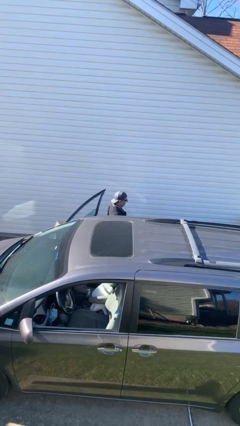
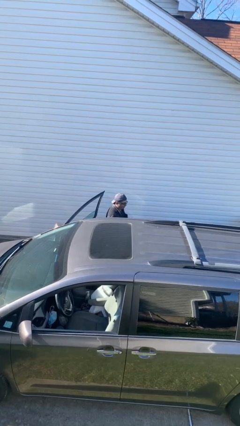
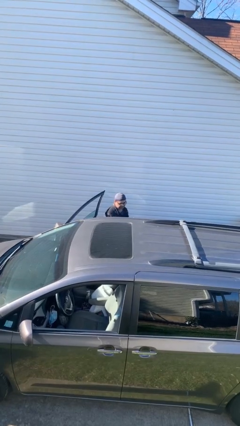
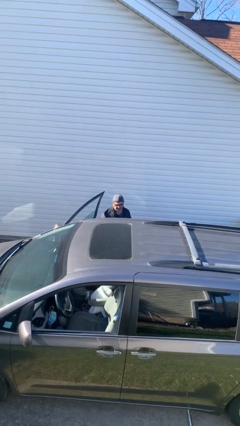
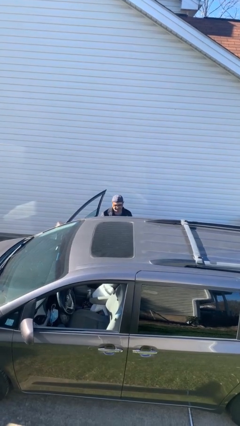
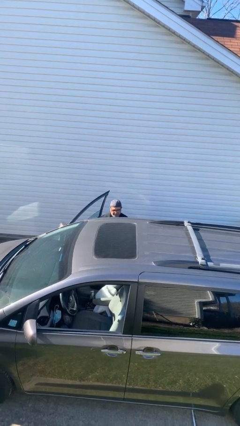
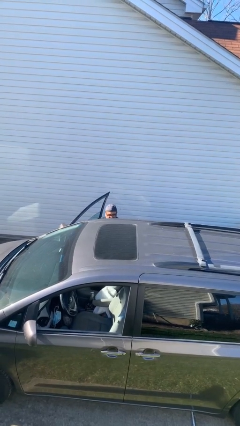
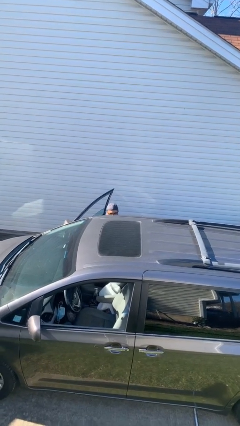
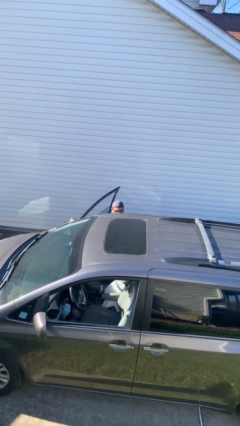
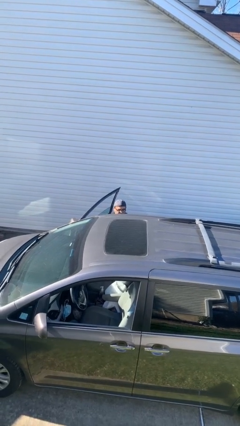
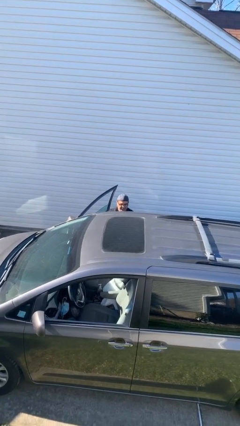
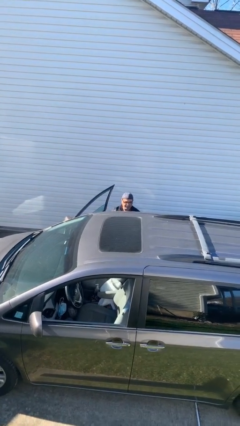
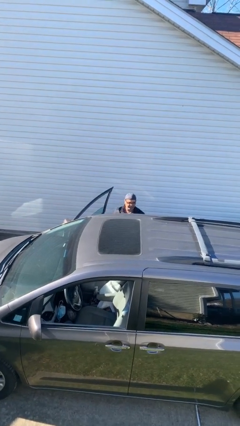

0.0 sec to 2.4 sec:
person unloads car

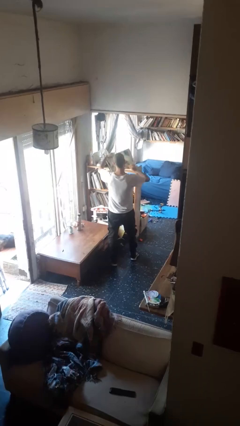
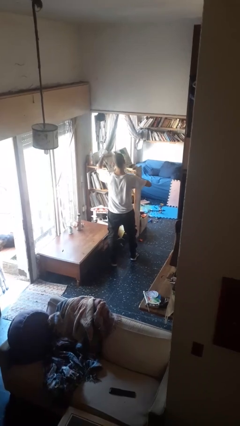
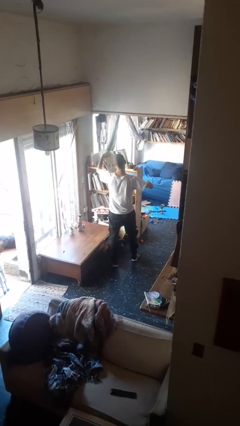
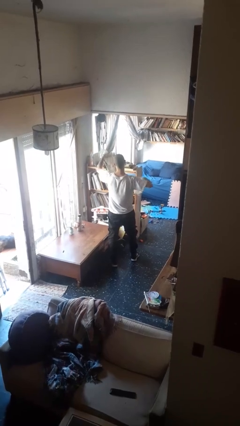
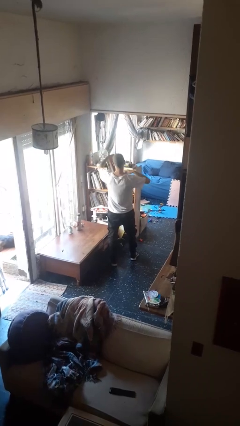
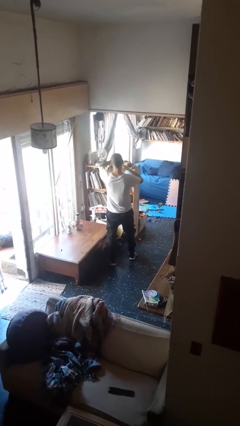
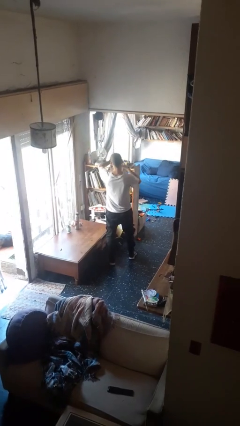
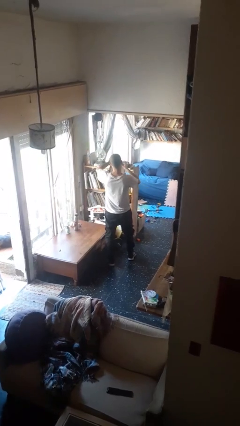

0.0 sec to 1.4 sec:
person tears paper

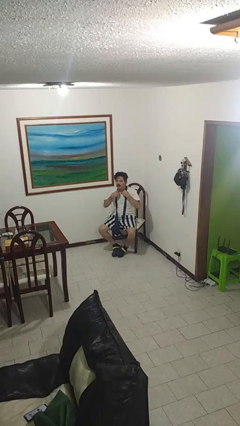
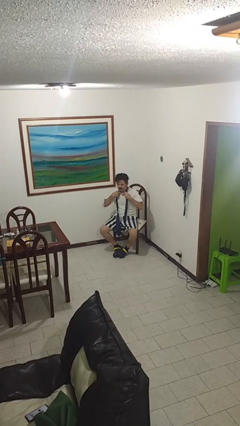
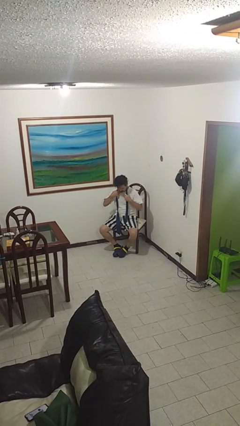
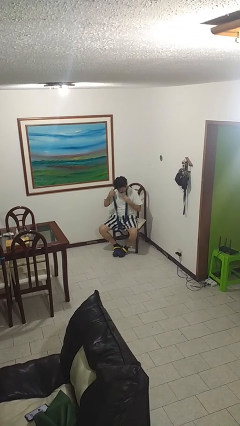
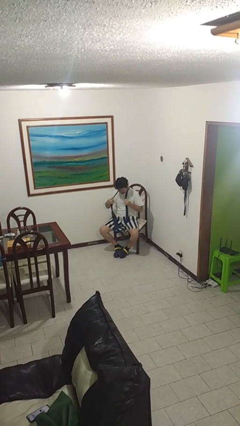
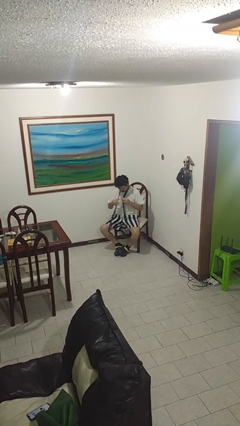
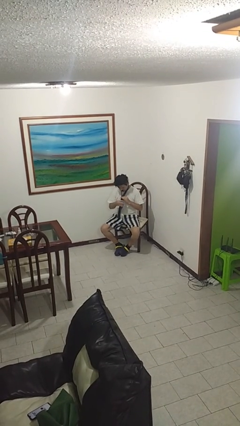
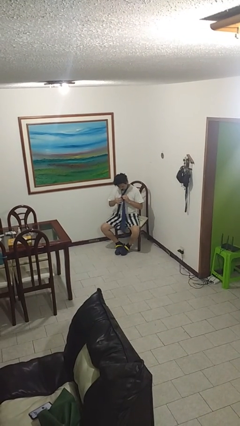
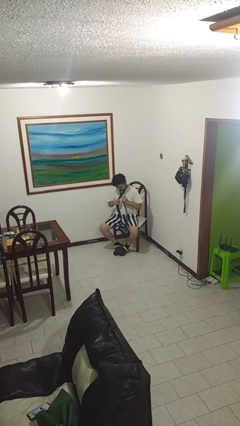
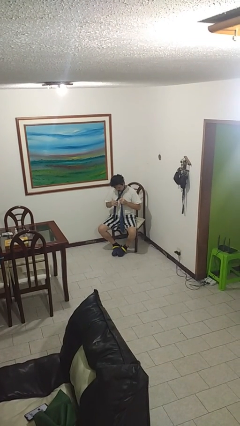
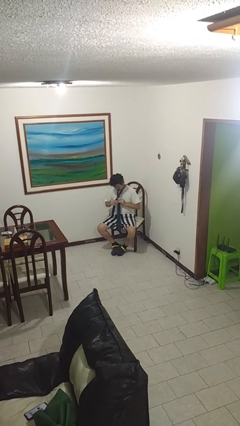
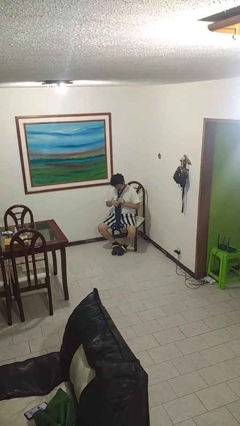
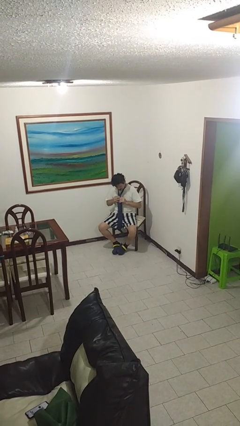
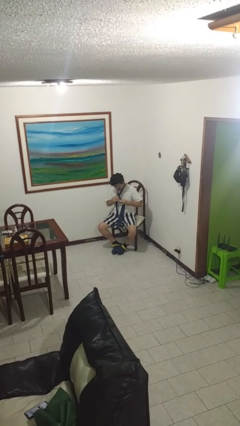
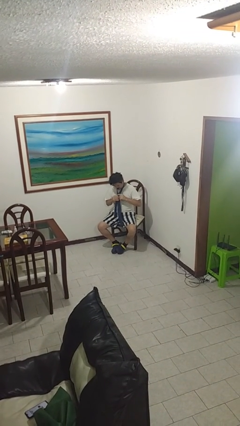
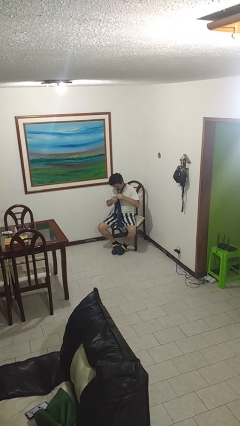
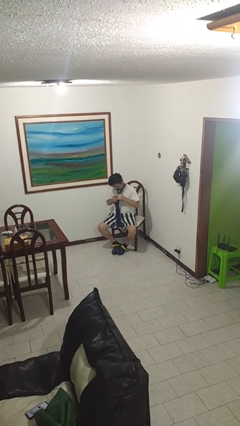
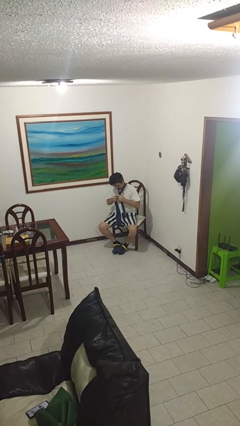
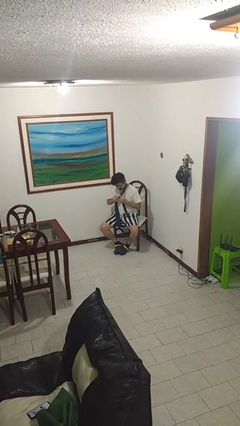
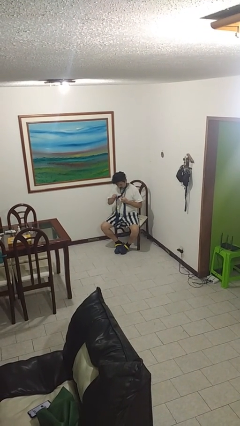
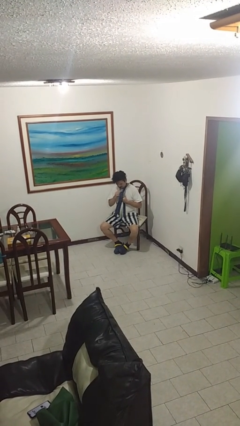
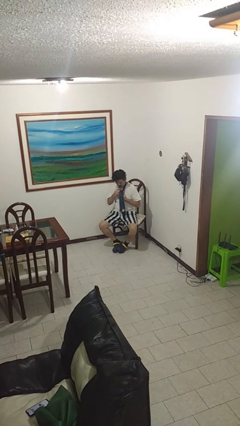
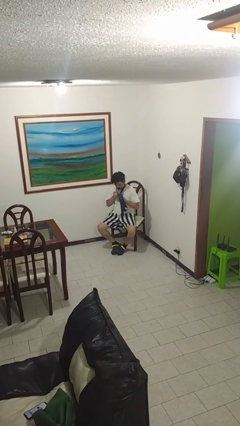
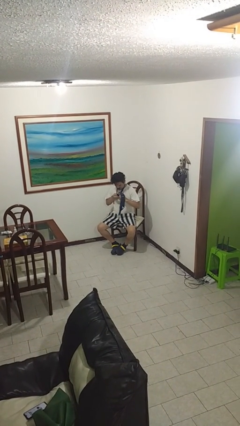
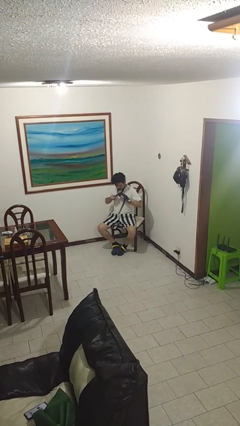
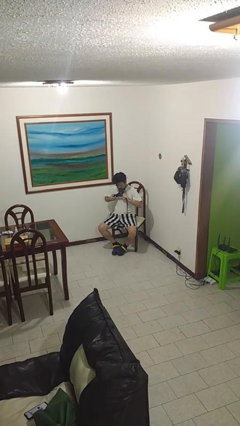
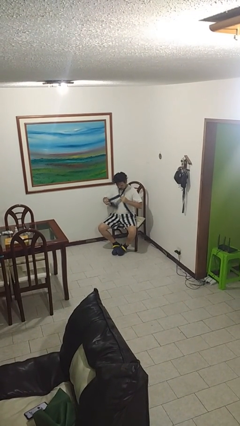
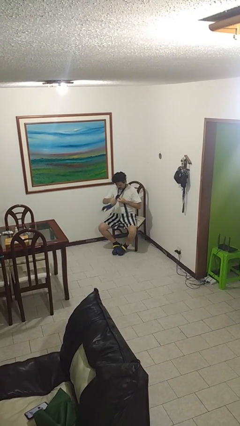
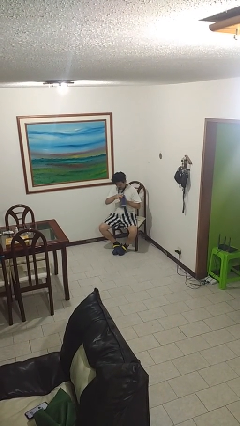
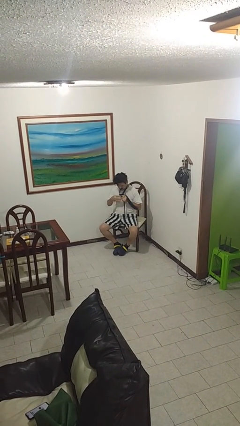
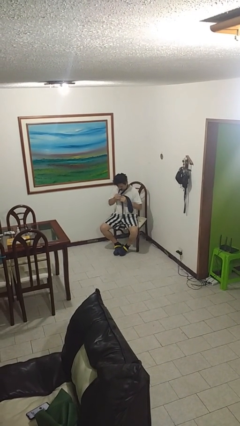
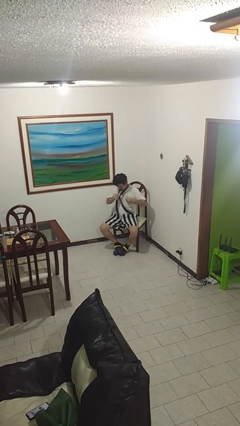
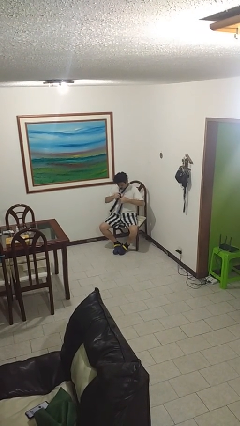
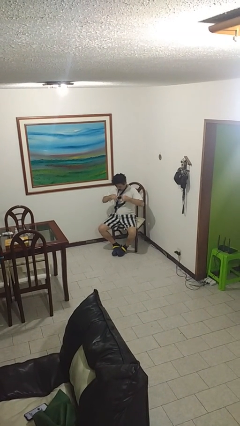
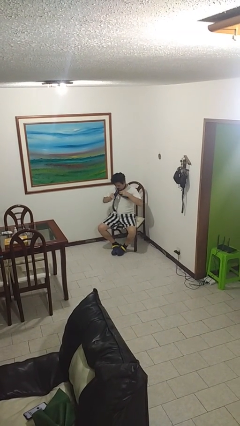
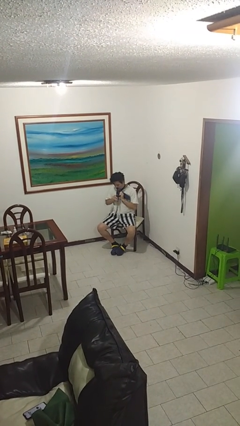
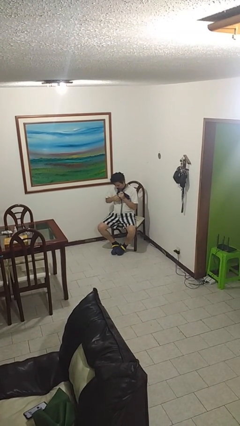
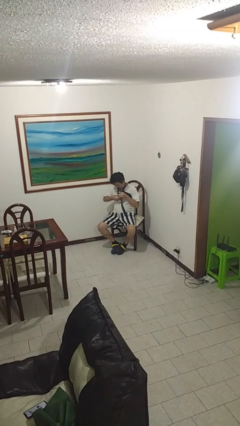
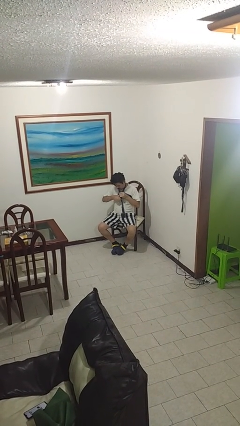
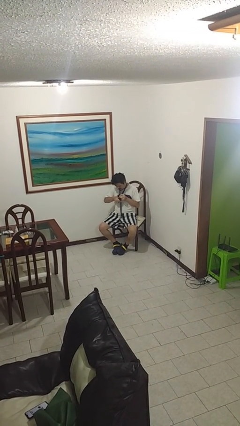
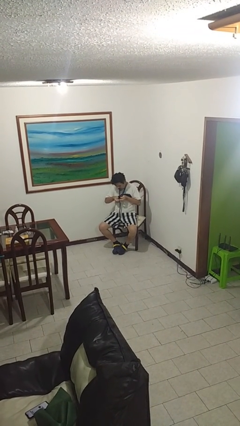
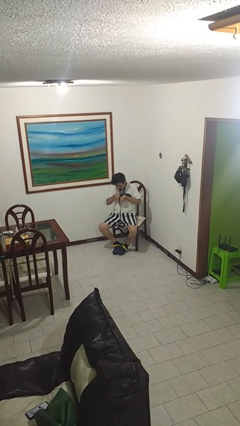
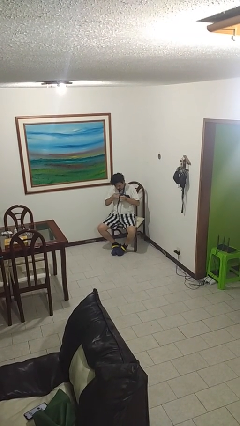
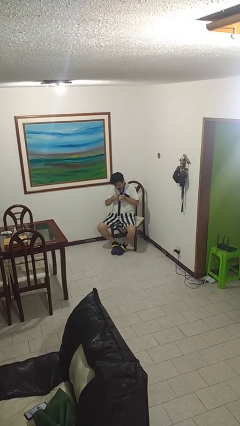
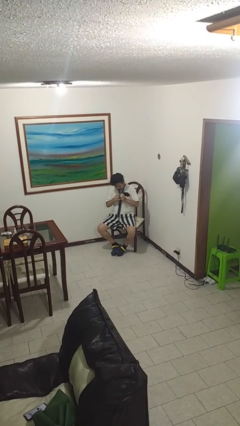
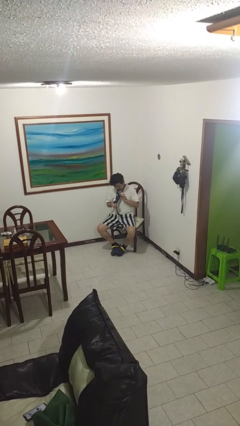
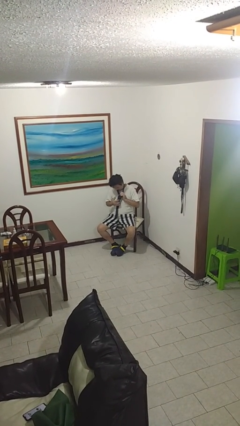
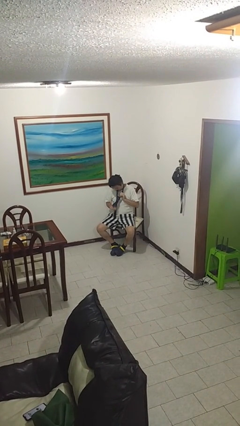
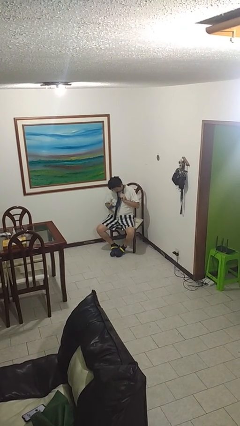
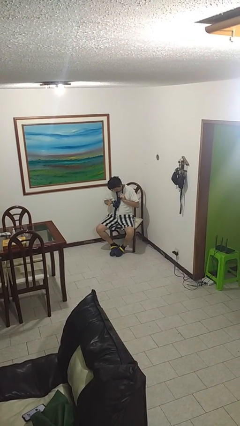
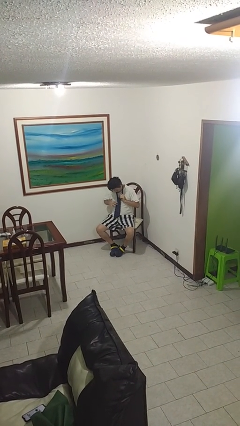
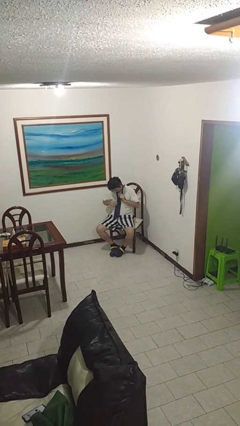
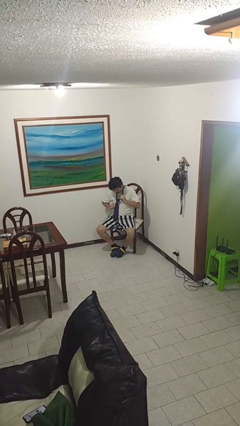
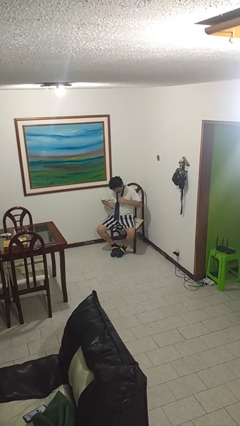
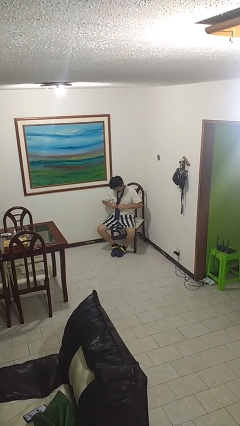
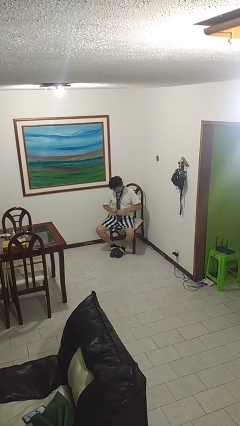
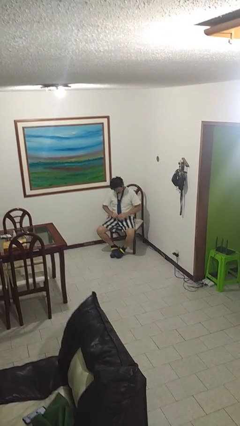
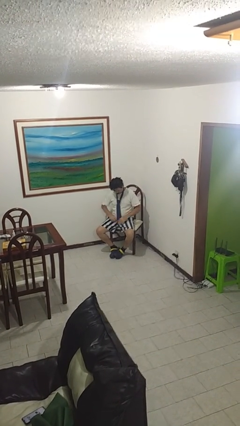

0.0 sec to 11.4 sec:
person puts on necktie

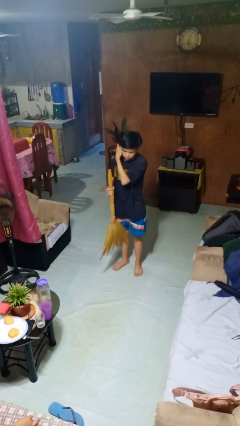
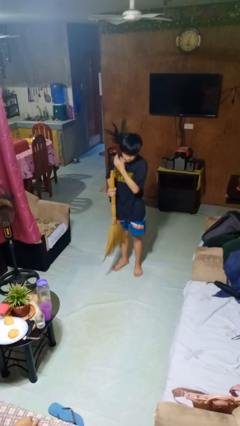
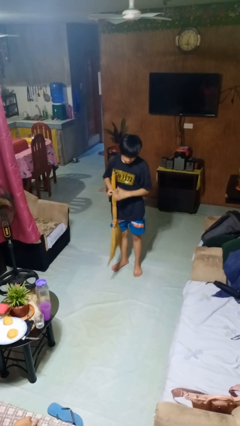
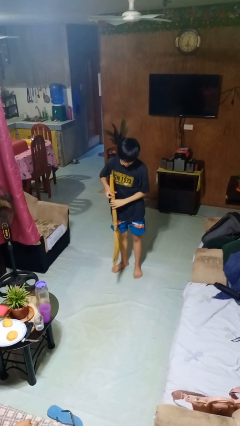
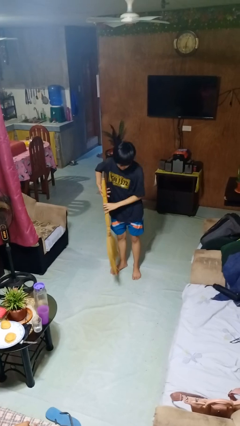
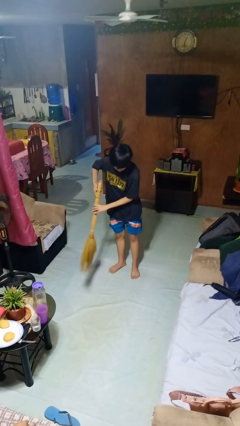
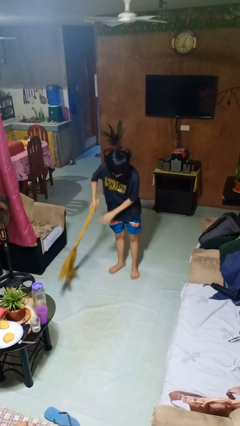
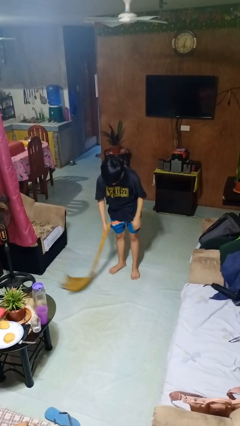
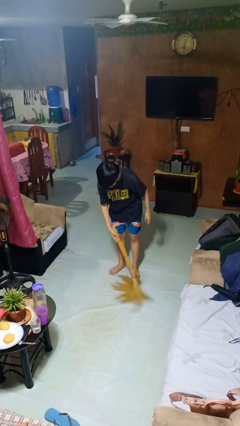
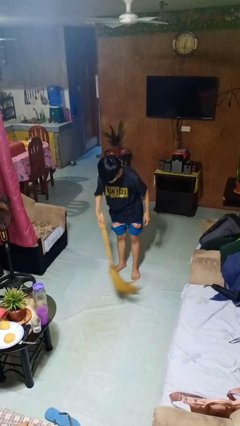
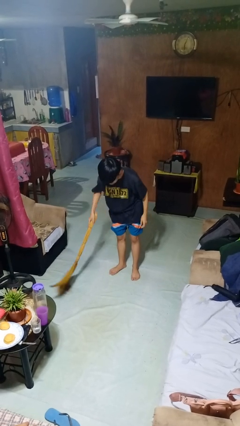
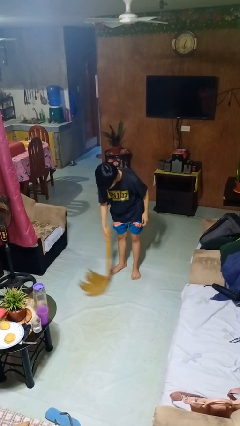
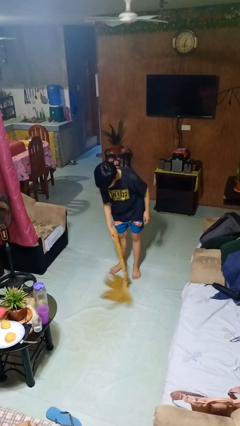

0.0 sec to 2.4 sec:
person sweeps floor

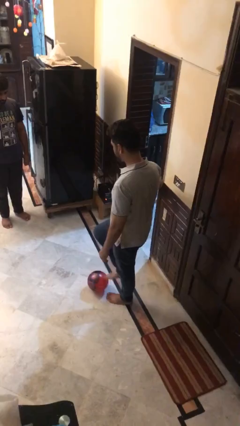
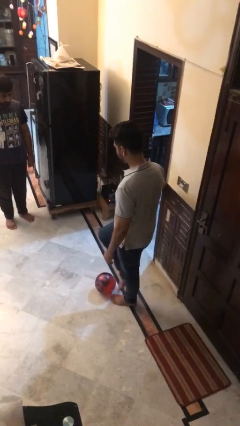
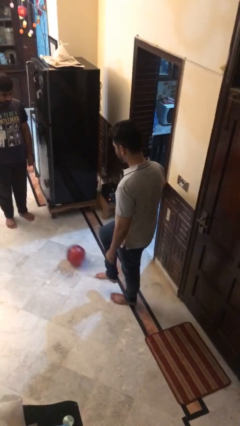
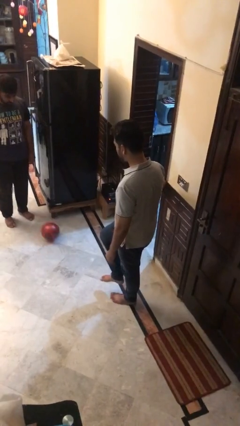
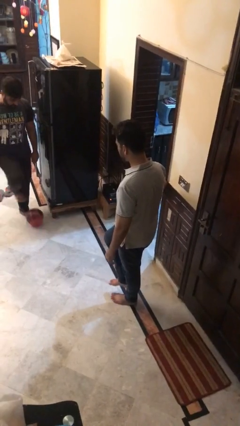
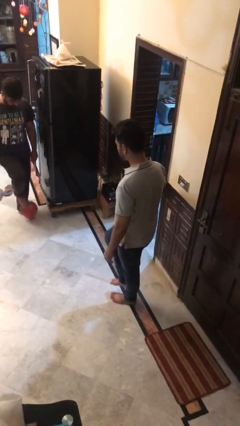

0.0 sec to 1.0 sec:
person kicks object to person
